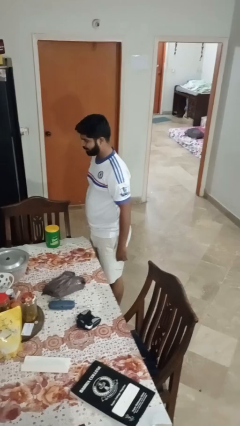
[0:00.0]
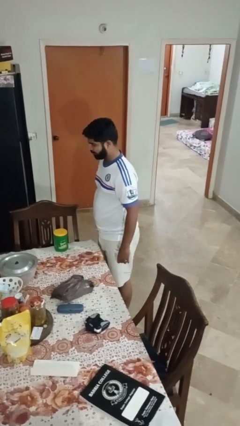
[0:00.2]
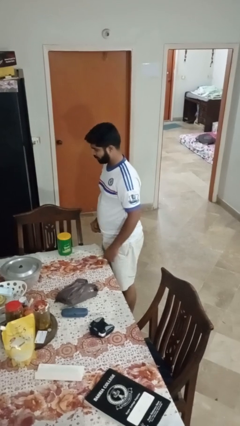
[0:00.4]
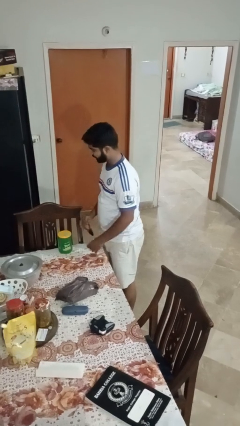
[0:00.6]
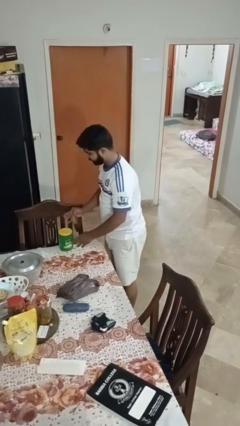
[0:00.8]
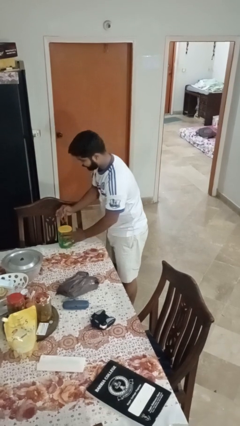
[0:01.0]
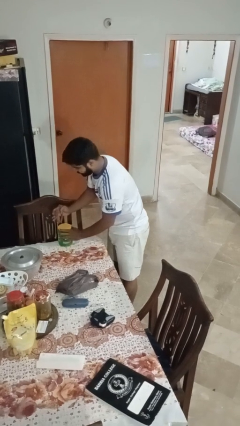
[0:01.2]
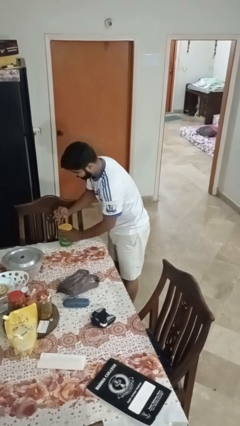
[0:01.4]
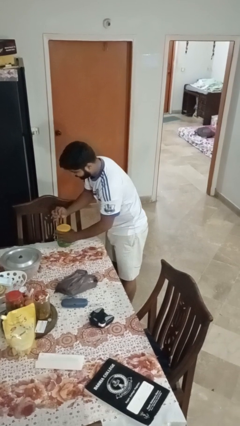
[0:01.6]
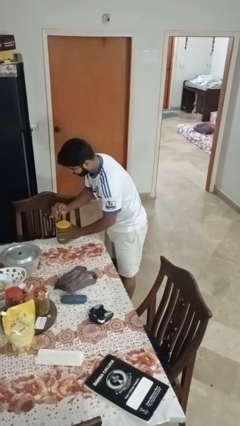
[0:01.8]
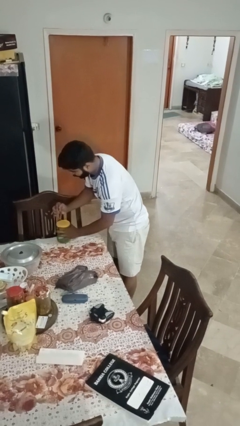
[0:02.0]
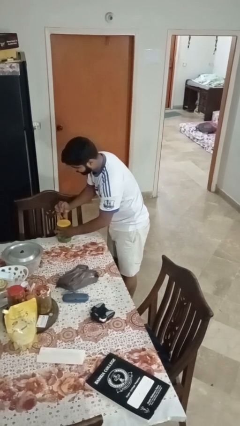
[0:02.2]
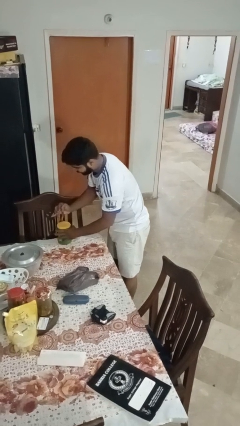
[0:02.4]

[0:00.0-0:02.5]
person opens can with can opener

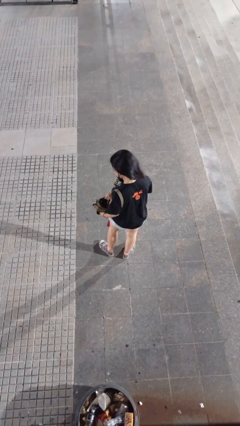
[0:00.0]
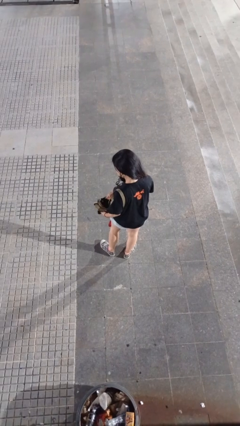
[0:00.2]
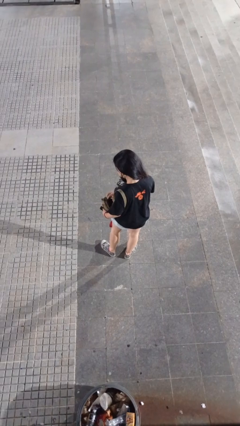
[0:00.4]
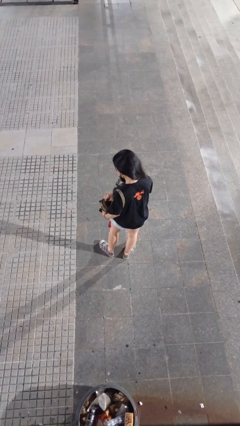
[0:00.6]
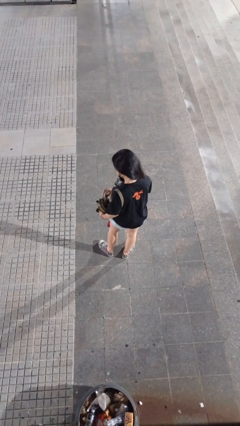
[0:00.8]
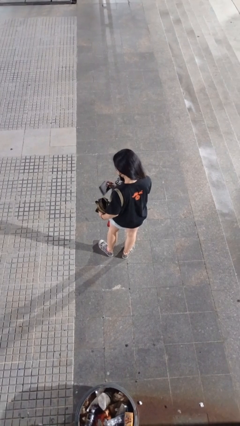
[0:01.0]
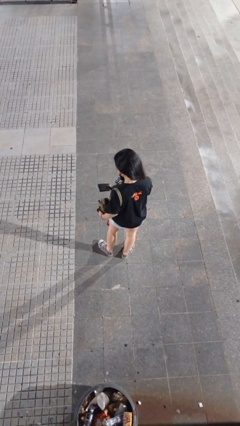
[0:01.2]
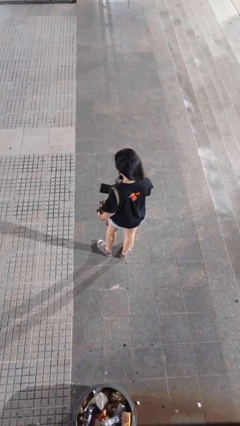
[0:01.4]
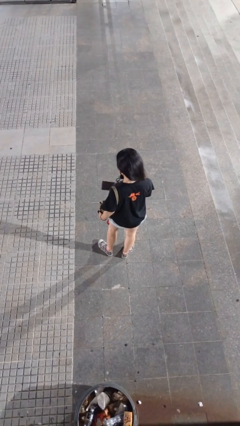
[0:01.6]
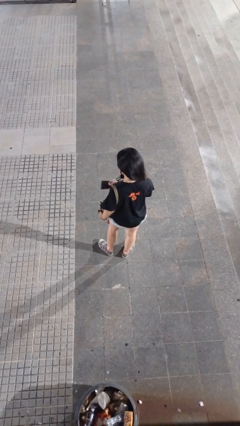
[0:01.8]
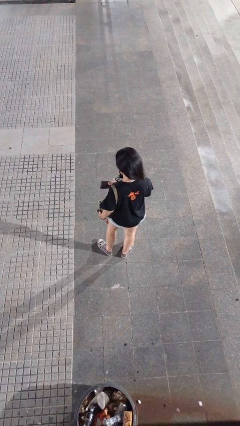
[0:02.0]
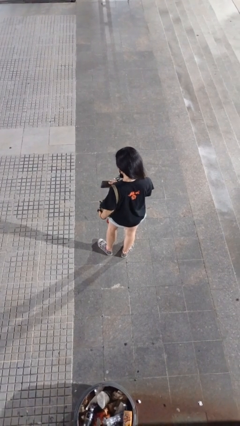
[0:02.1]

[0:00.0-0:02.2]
person takes object from purse

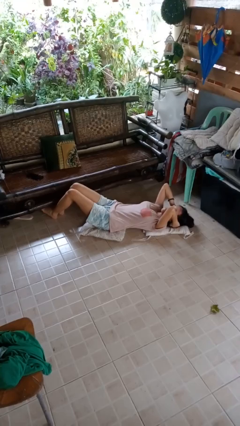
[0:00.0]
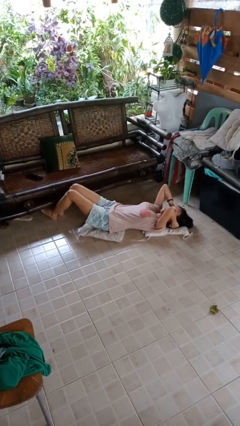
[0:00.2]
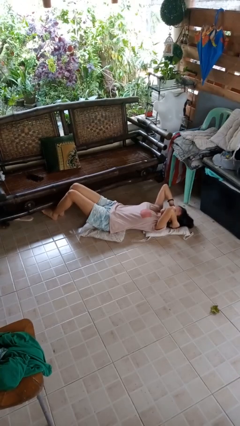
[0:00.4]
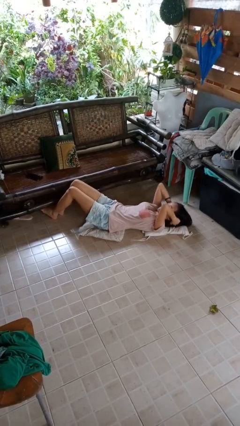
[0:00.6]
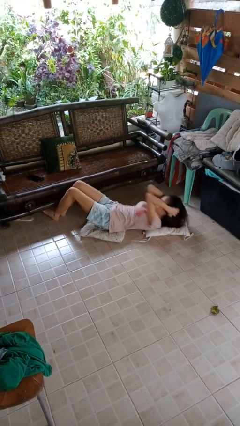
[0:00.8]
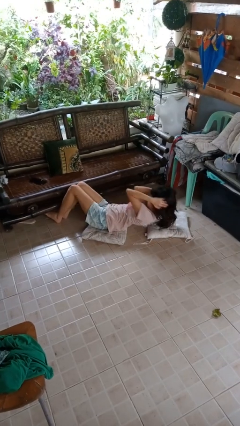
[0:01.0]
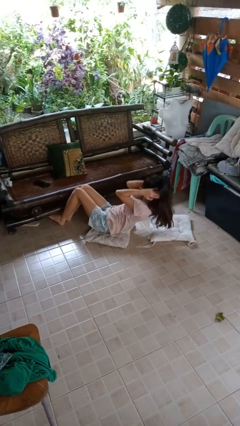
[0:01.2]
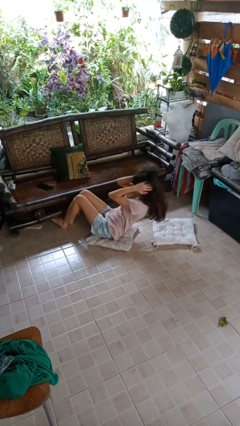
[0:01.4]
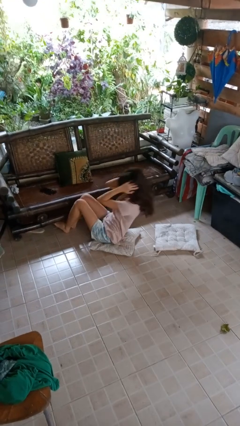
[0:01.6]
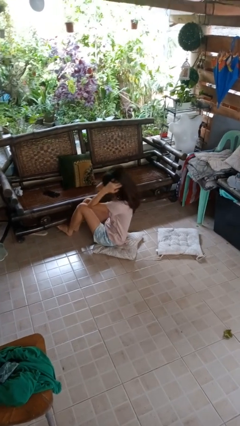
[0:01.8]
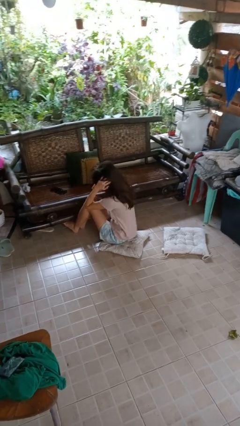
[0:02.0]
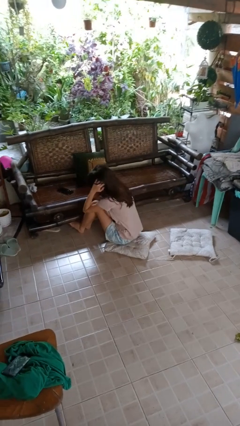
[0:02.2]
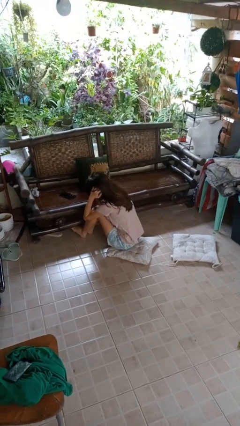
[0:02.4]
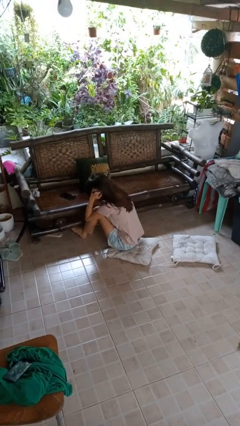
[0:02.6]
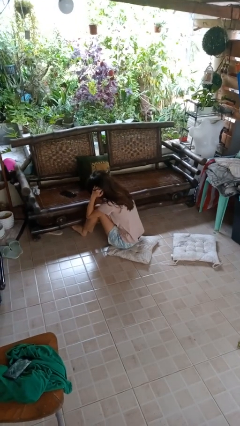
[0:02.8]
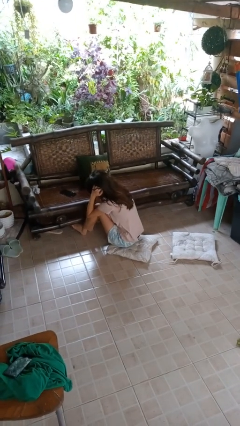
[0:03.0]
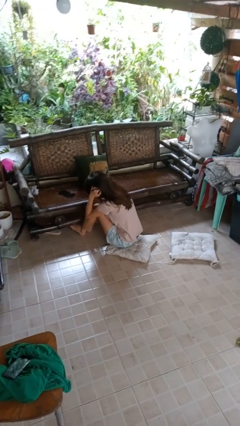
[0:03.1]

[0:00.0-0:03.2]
person exercises with situp

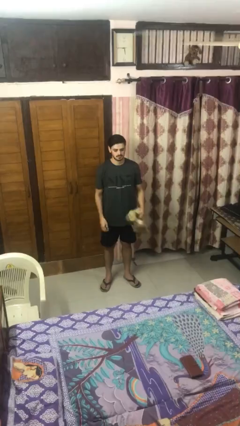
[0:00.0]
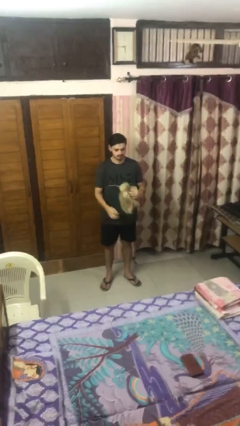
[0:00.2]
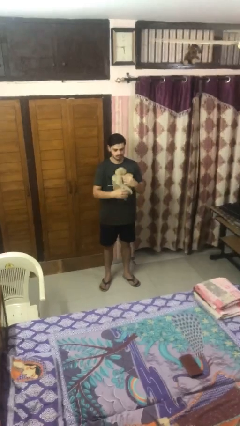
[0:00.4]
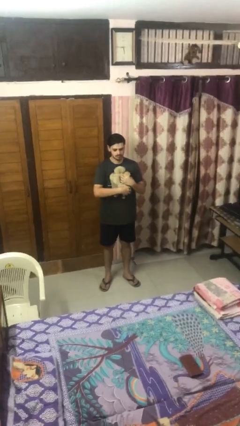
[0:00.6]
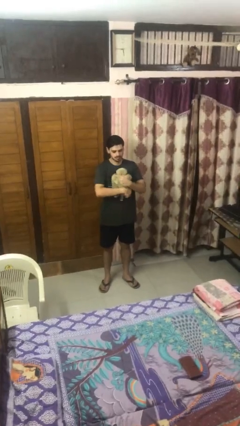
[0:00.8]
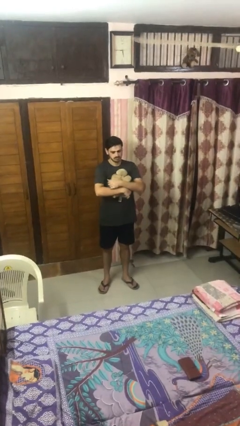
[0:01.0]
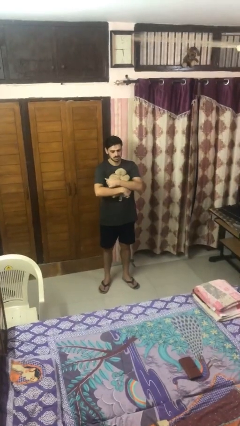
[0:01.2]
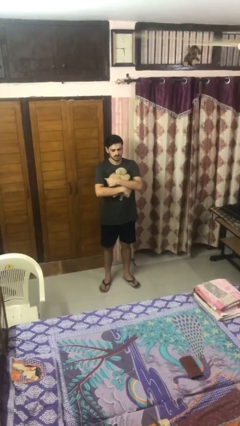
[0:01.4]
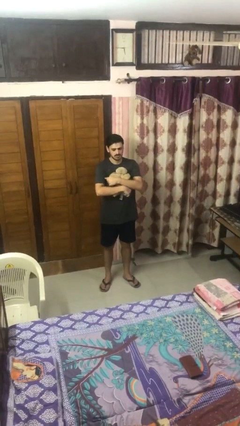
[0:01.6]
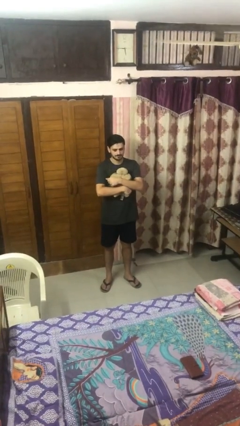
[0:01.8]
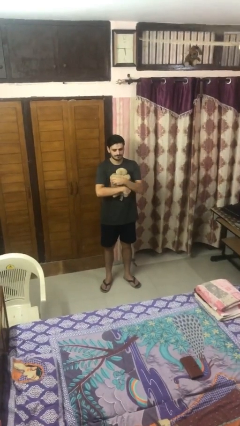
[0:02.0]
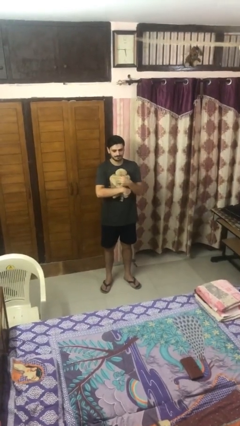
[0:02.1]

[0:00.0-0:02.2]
person hugs stuffed animal

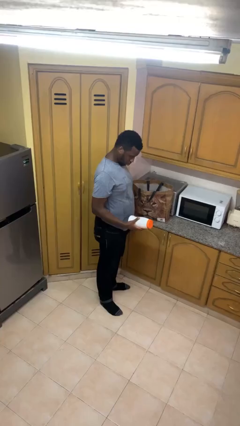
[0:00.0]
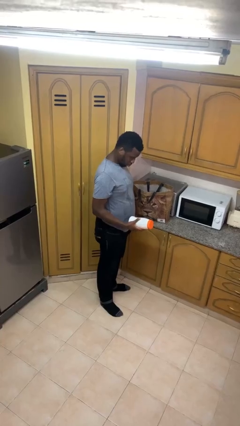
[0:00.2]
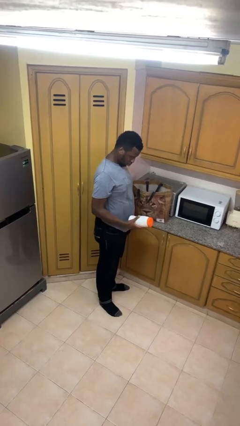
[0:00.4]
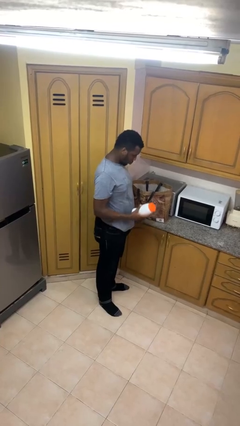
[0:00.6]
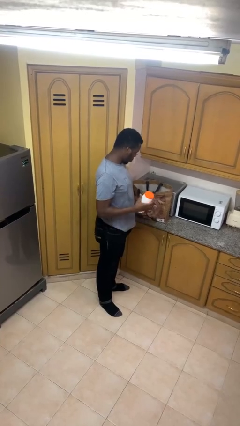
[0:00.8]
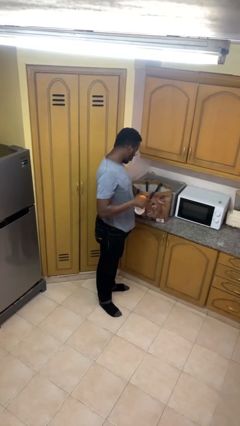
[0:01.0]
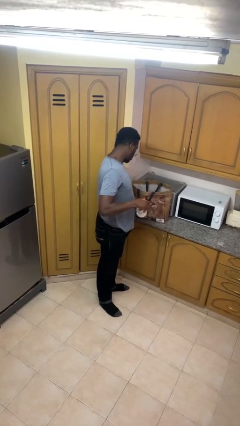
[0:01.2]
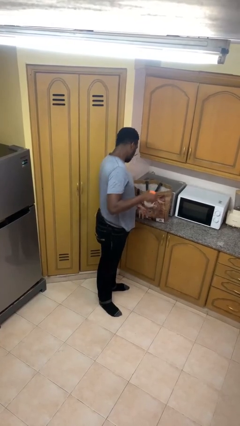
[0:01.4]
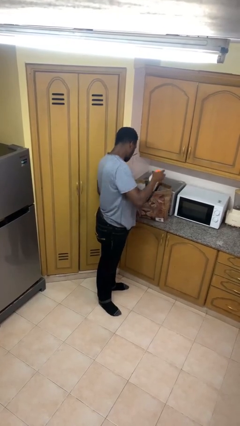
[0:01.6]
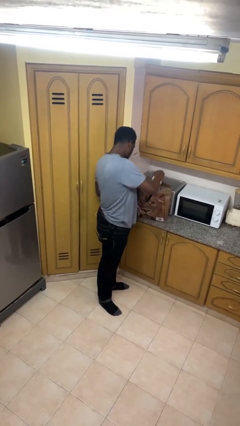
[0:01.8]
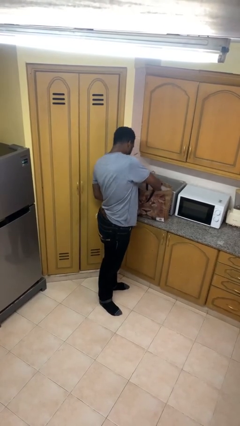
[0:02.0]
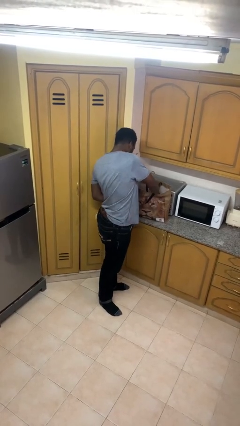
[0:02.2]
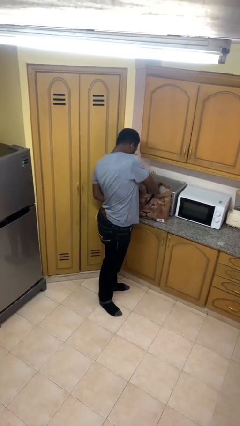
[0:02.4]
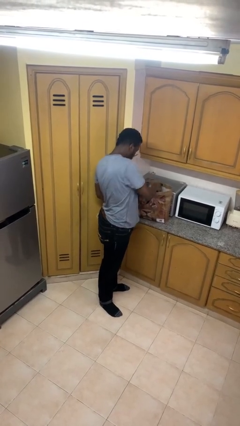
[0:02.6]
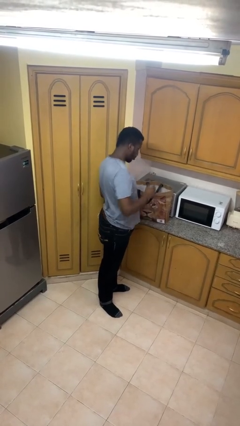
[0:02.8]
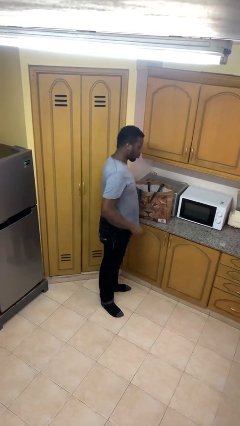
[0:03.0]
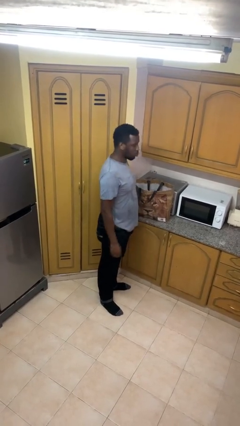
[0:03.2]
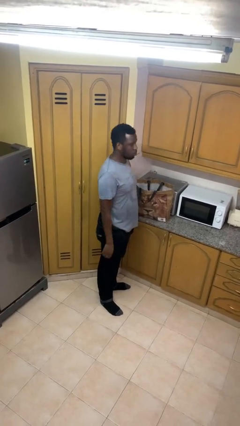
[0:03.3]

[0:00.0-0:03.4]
person puts object into bag

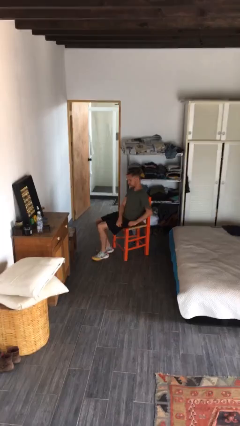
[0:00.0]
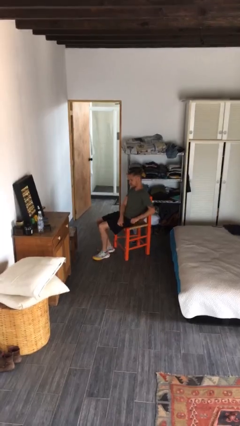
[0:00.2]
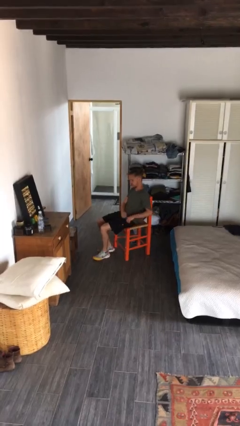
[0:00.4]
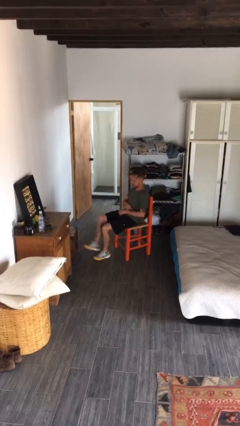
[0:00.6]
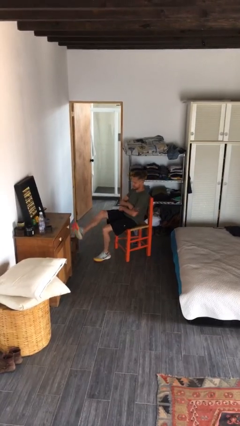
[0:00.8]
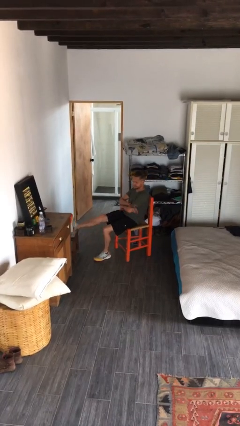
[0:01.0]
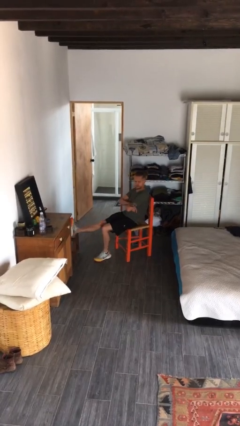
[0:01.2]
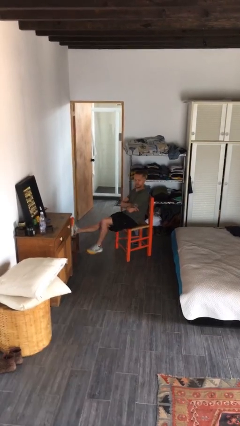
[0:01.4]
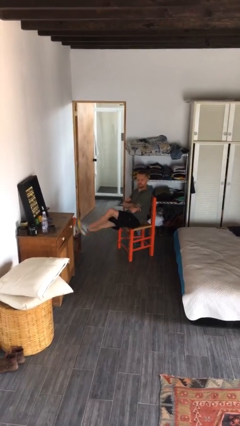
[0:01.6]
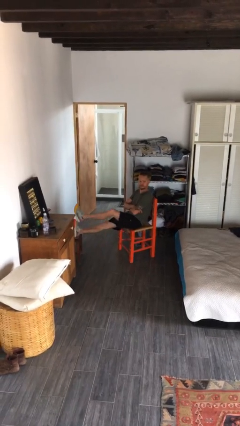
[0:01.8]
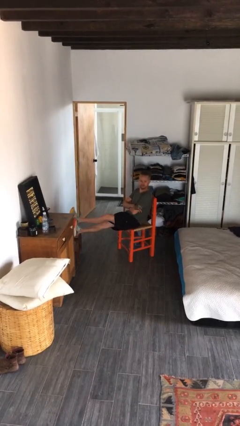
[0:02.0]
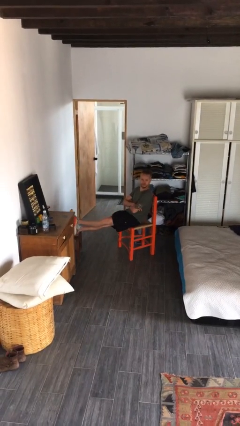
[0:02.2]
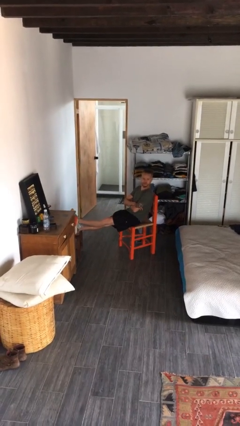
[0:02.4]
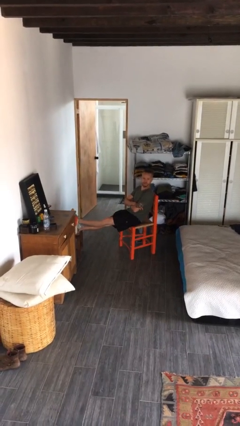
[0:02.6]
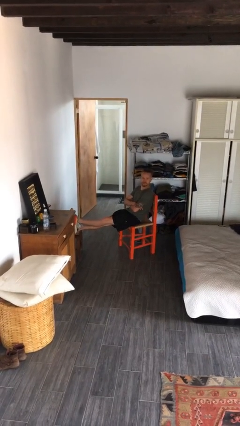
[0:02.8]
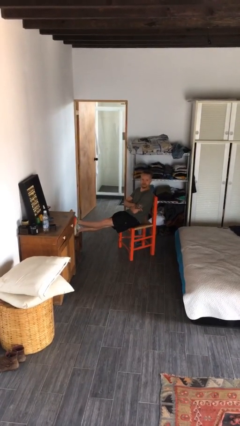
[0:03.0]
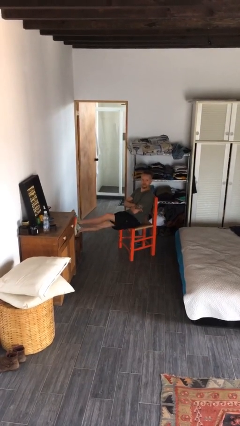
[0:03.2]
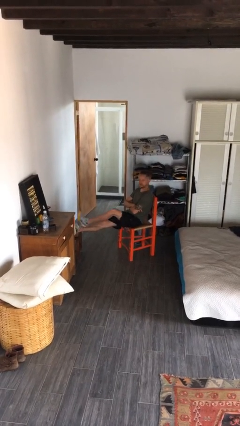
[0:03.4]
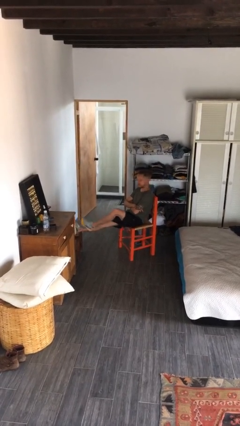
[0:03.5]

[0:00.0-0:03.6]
person puts feet up

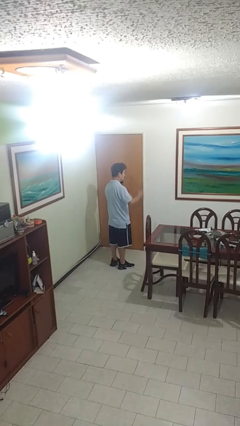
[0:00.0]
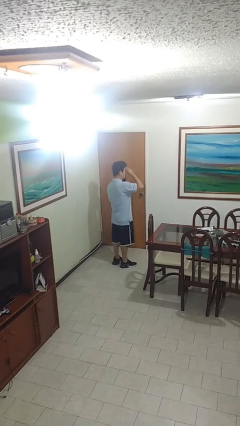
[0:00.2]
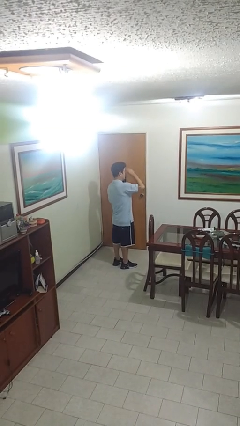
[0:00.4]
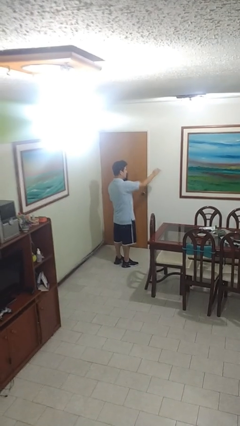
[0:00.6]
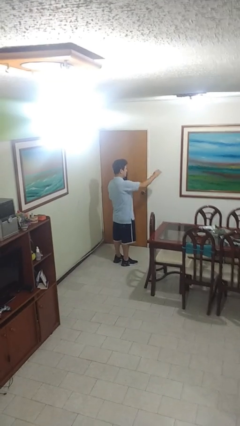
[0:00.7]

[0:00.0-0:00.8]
person salutes
